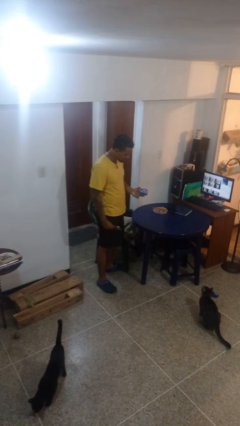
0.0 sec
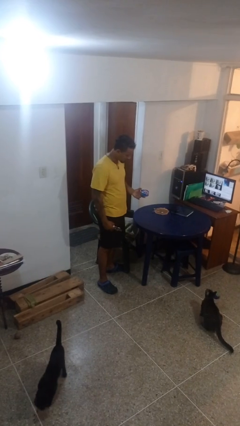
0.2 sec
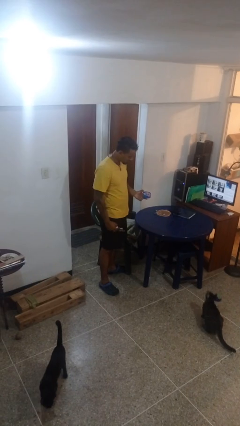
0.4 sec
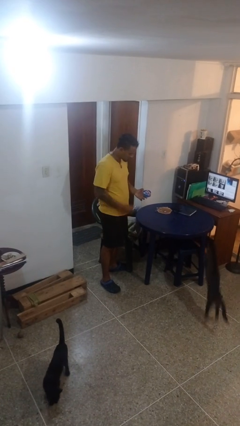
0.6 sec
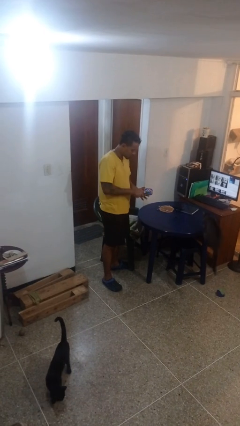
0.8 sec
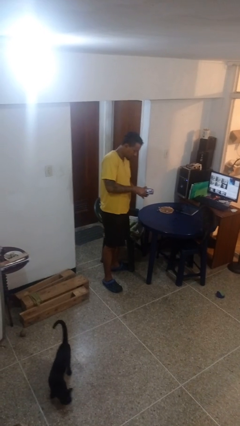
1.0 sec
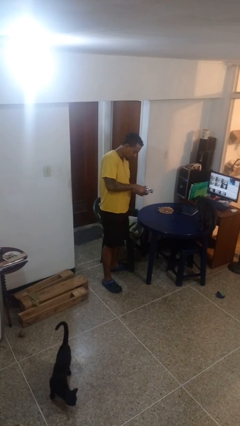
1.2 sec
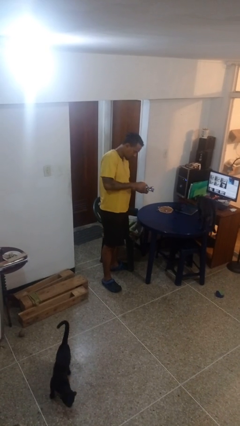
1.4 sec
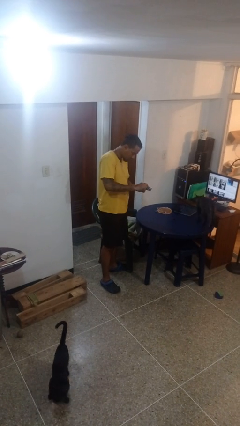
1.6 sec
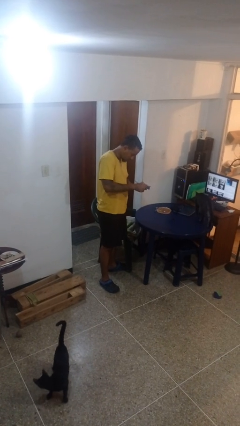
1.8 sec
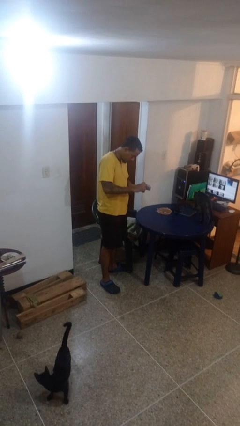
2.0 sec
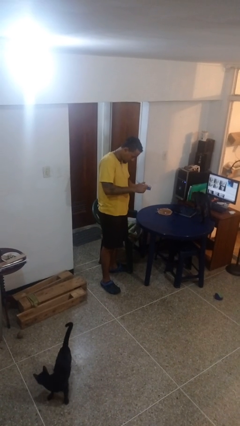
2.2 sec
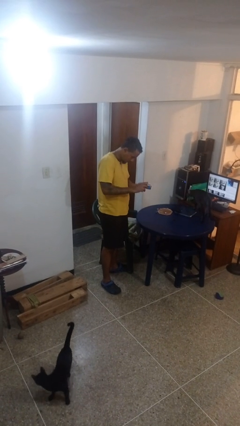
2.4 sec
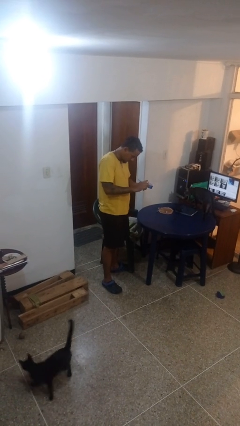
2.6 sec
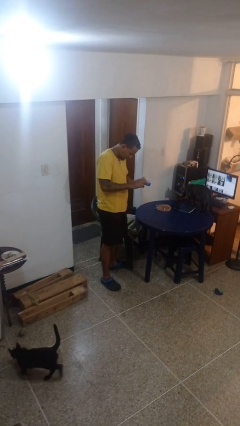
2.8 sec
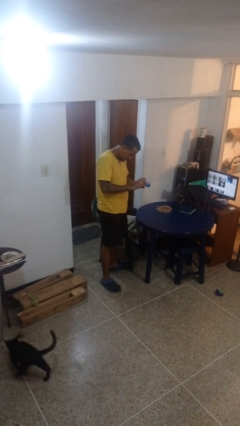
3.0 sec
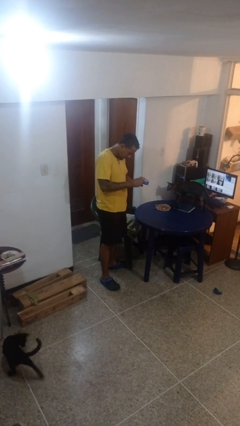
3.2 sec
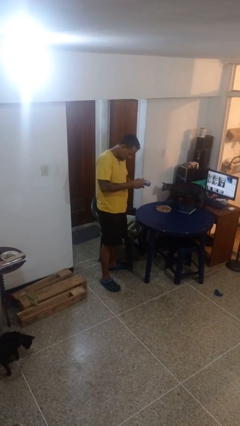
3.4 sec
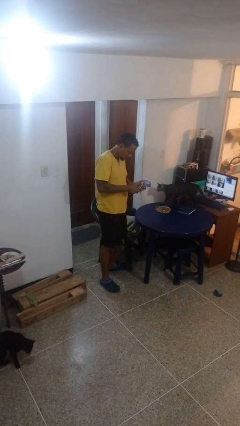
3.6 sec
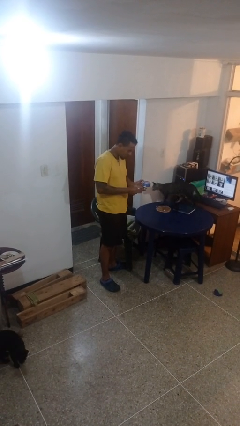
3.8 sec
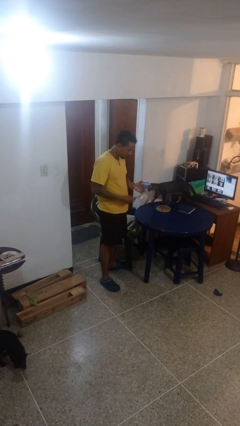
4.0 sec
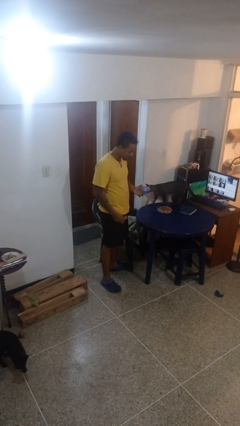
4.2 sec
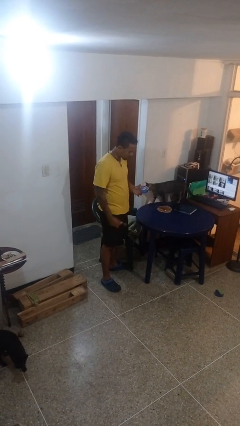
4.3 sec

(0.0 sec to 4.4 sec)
person opens can with can opener

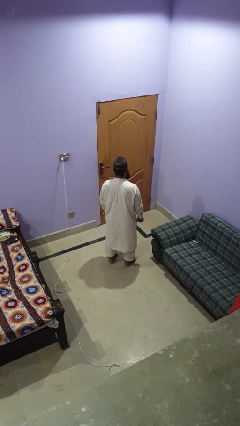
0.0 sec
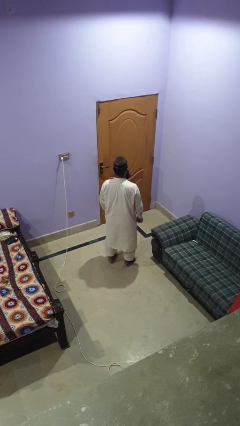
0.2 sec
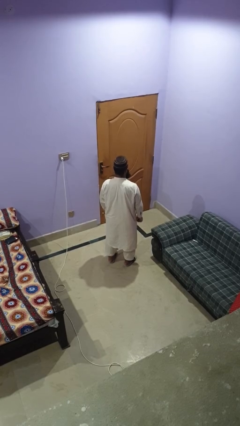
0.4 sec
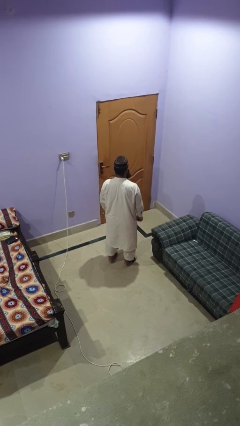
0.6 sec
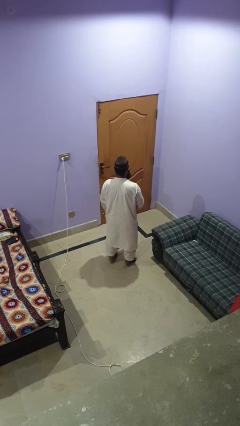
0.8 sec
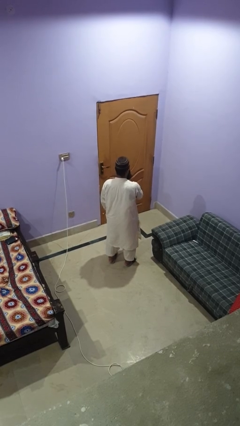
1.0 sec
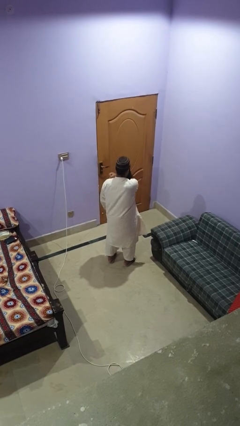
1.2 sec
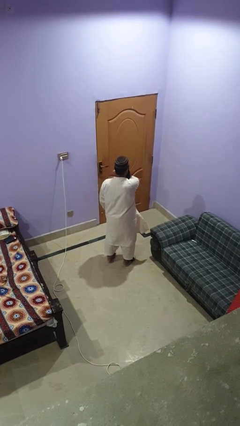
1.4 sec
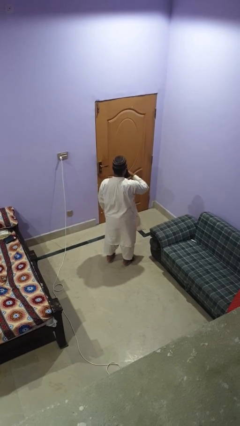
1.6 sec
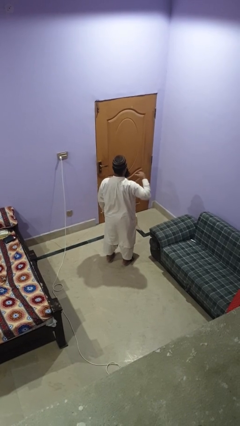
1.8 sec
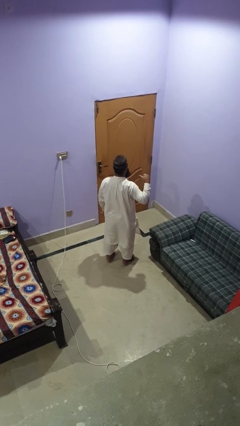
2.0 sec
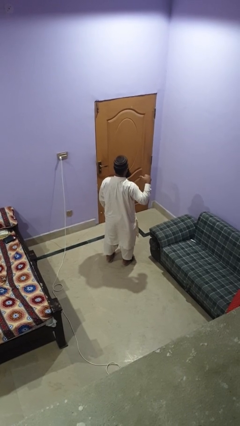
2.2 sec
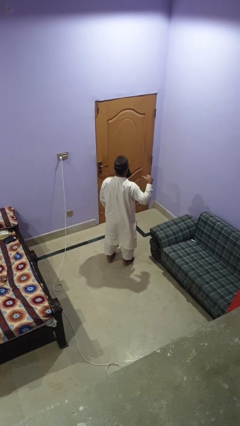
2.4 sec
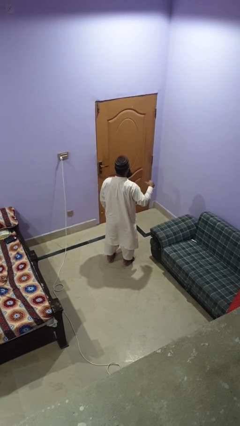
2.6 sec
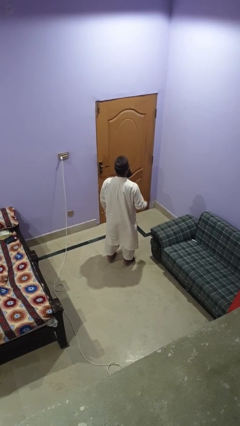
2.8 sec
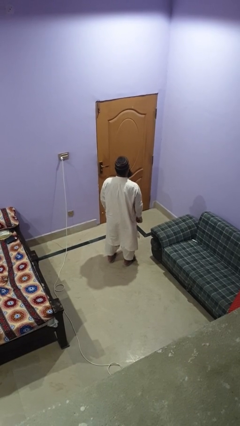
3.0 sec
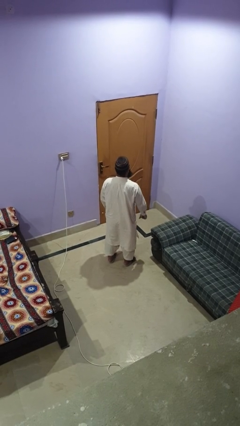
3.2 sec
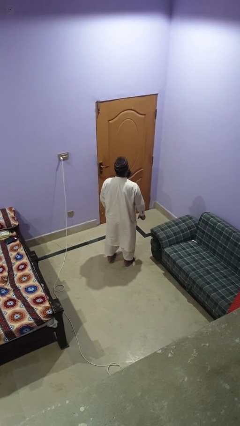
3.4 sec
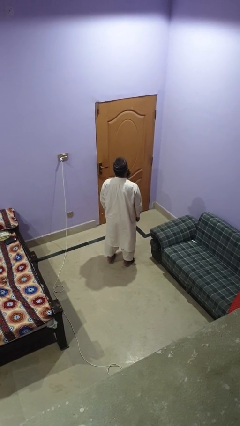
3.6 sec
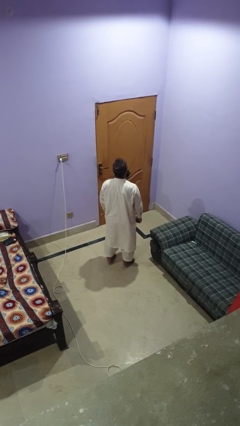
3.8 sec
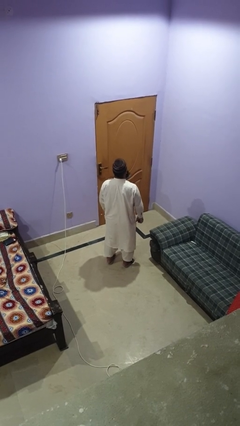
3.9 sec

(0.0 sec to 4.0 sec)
person gestures cut

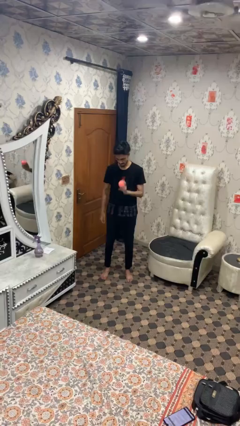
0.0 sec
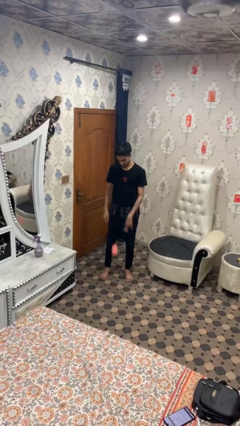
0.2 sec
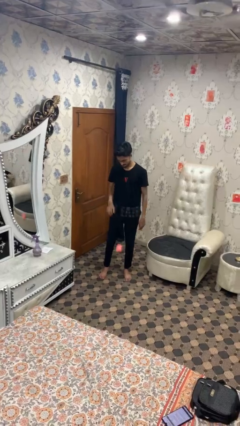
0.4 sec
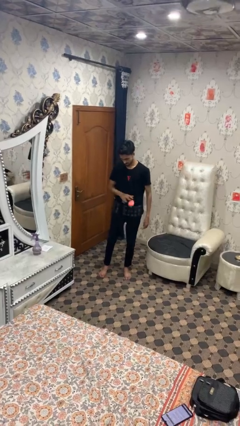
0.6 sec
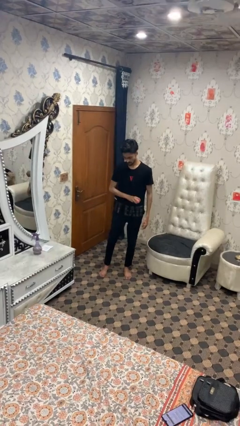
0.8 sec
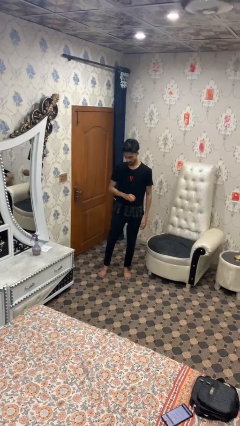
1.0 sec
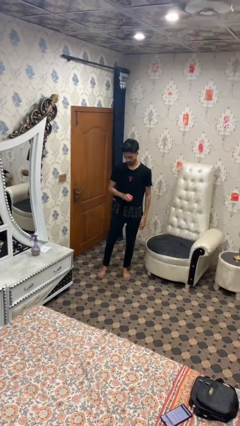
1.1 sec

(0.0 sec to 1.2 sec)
person bounces ball on floor

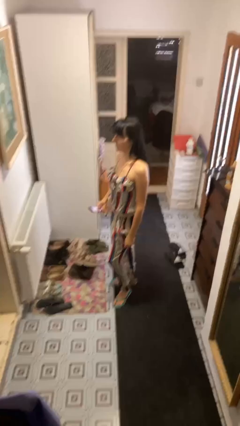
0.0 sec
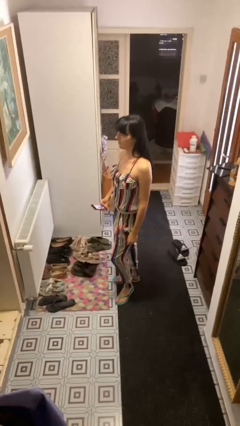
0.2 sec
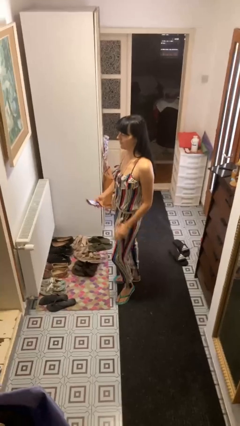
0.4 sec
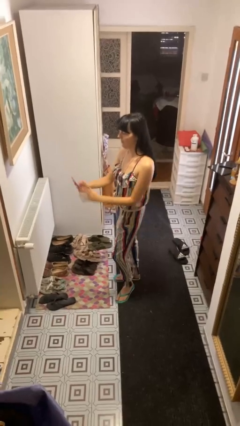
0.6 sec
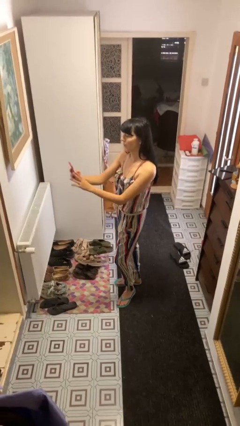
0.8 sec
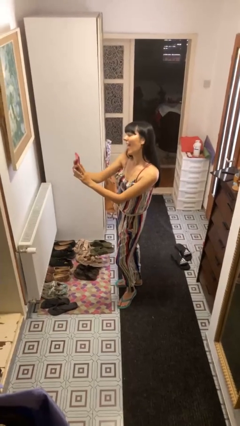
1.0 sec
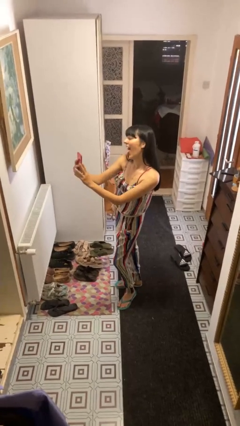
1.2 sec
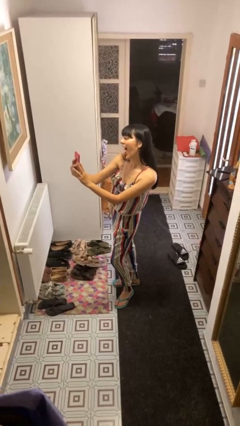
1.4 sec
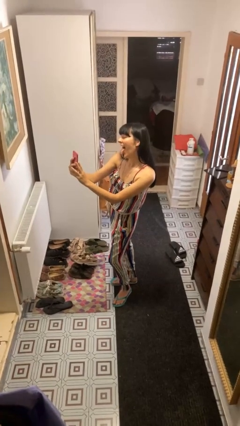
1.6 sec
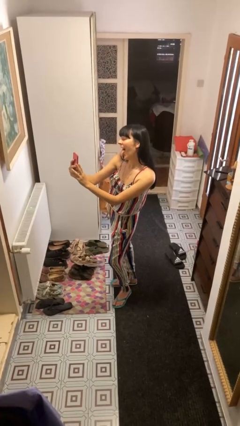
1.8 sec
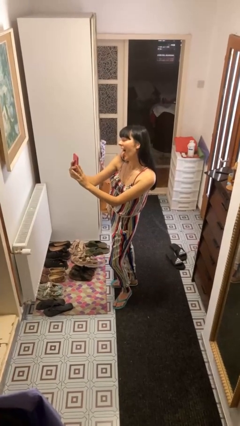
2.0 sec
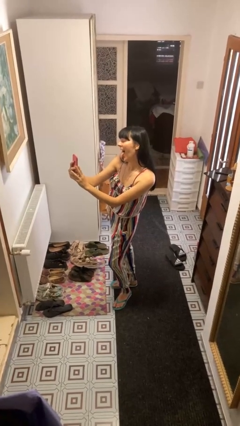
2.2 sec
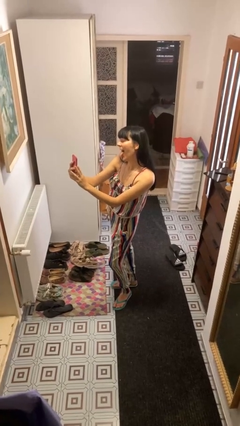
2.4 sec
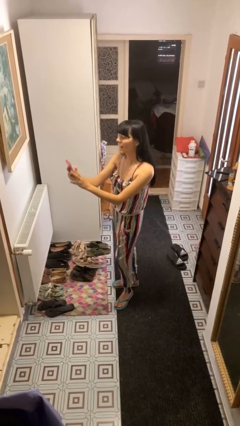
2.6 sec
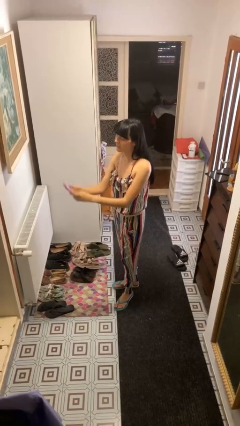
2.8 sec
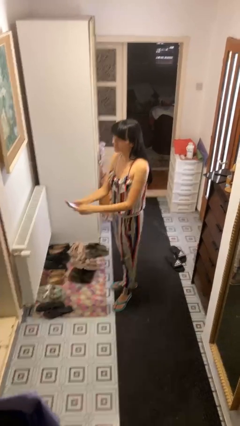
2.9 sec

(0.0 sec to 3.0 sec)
person takes selfie

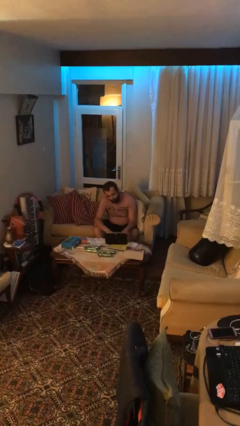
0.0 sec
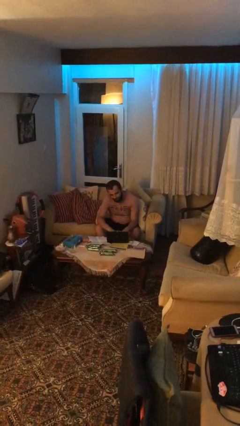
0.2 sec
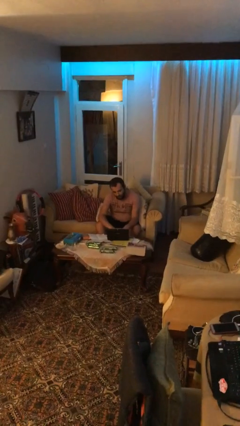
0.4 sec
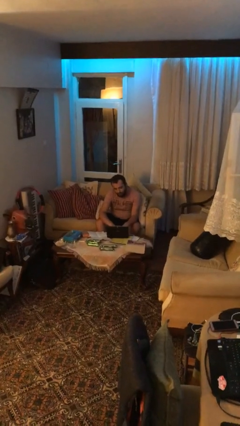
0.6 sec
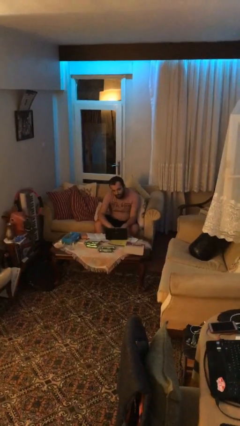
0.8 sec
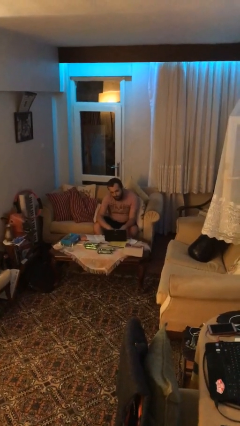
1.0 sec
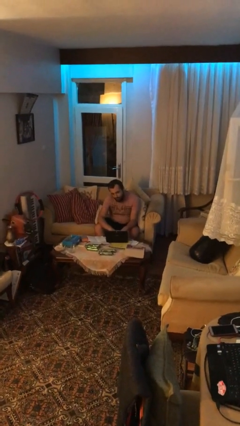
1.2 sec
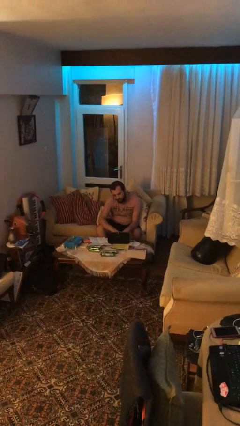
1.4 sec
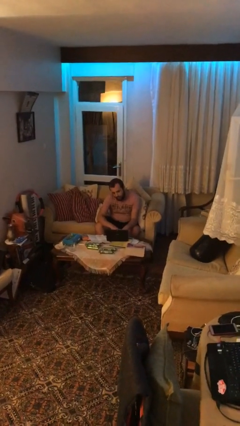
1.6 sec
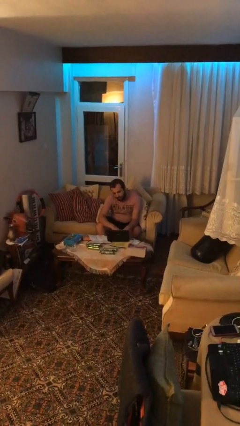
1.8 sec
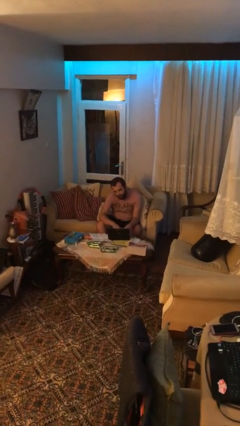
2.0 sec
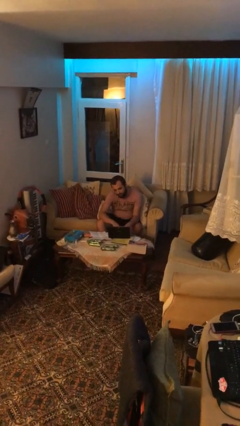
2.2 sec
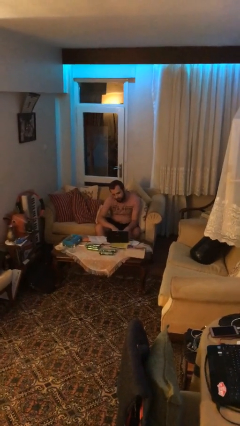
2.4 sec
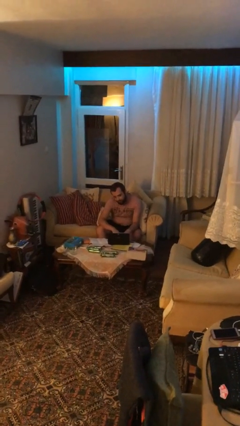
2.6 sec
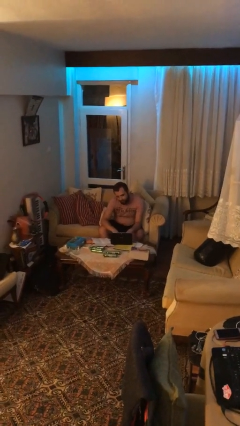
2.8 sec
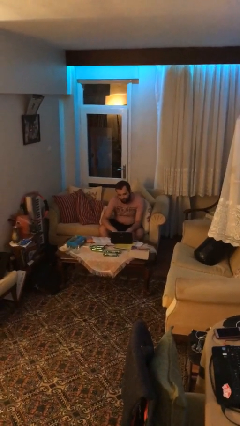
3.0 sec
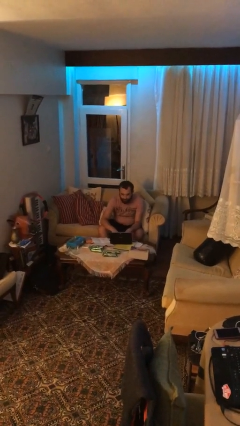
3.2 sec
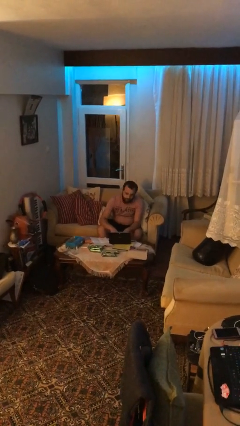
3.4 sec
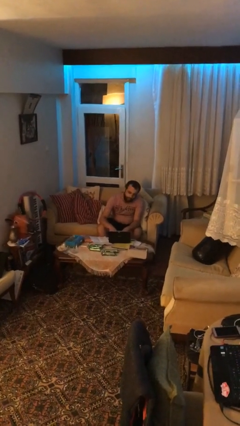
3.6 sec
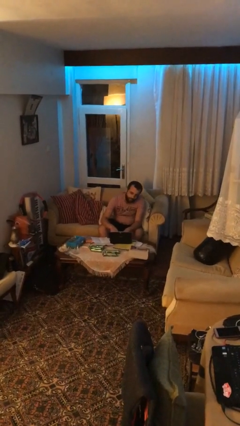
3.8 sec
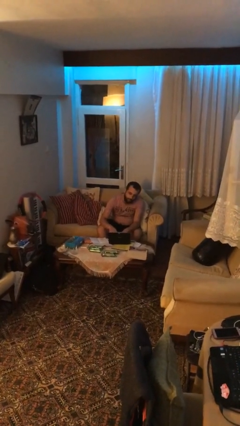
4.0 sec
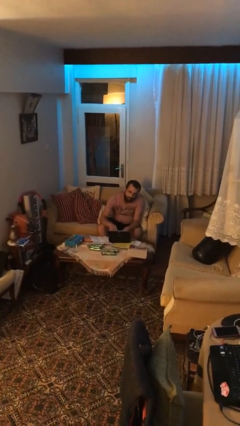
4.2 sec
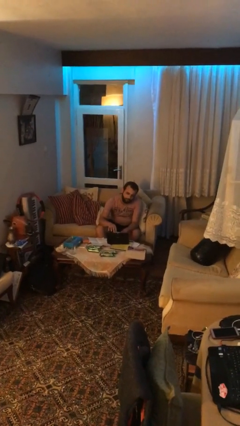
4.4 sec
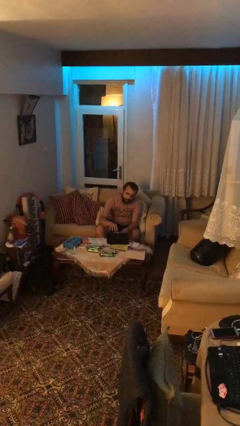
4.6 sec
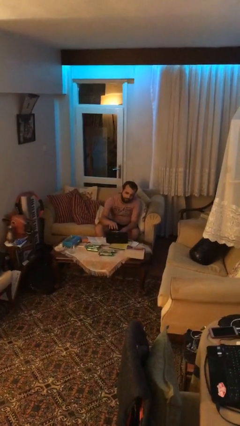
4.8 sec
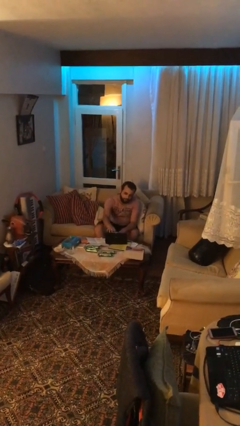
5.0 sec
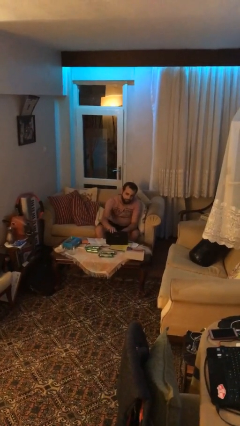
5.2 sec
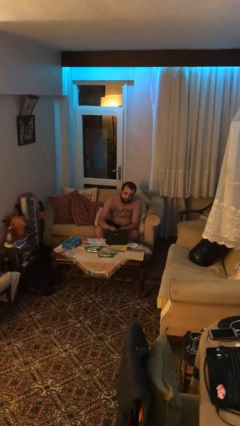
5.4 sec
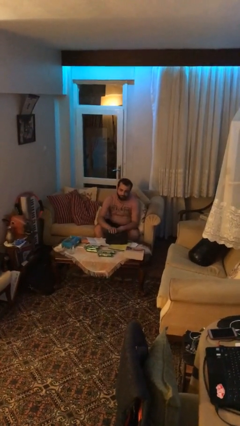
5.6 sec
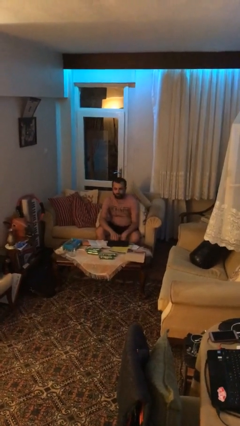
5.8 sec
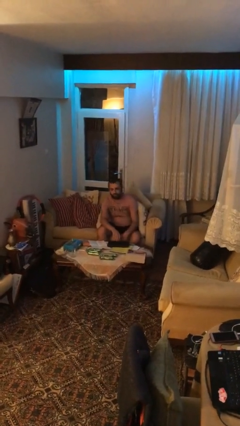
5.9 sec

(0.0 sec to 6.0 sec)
person interacts with laptop
